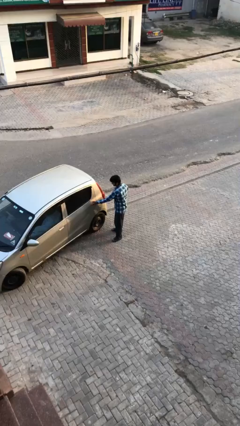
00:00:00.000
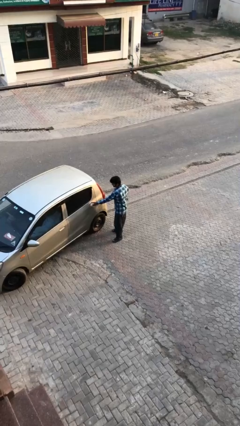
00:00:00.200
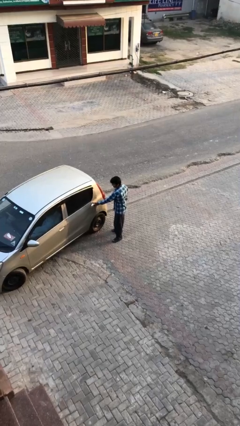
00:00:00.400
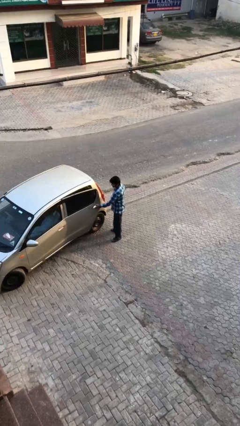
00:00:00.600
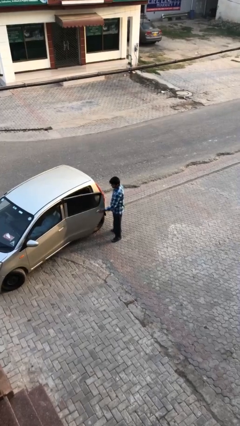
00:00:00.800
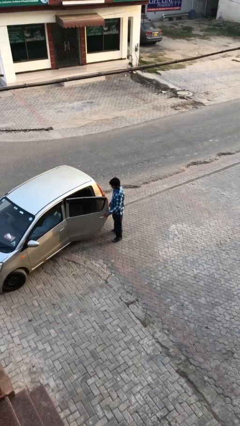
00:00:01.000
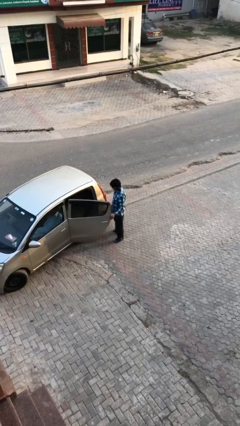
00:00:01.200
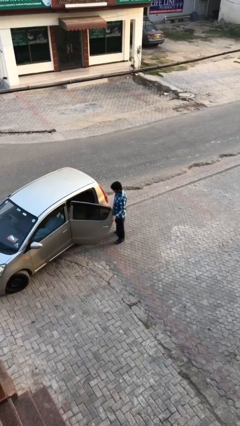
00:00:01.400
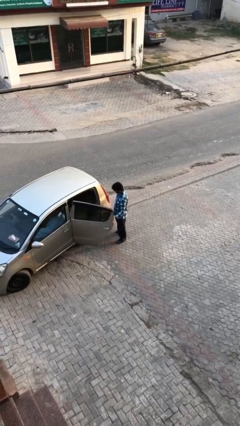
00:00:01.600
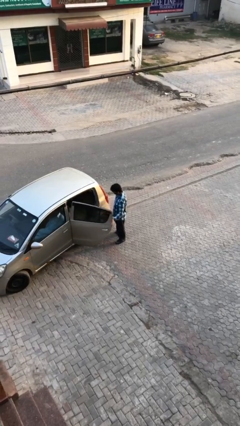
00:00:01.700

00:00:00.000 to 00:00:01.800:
person opens car door

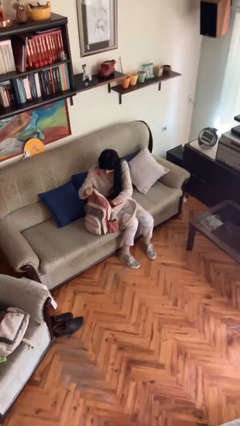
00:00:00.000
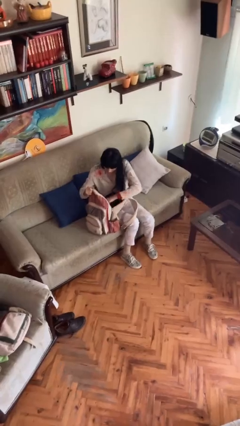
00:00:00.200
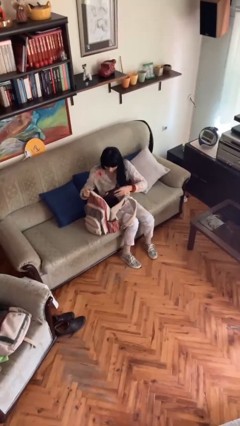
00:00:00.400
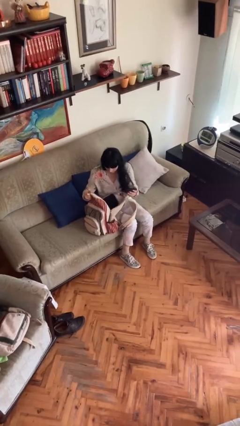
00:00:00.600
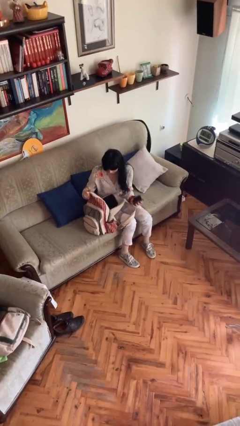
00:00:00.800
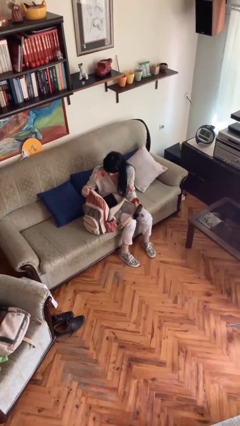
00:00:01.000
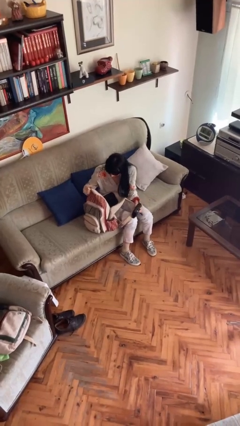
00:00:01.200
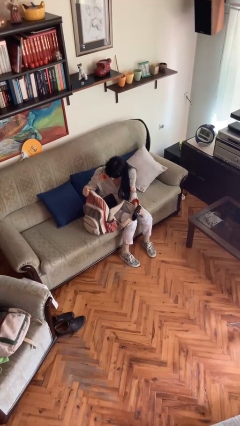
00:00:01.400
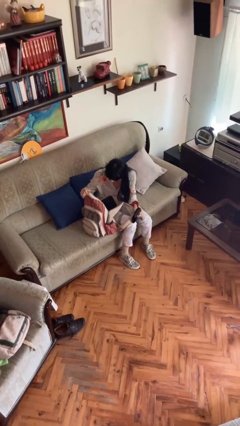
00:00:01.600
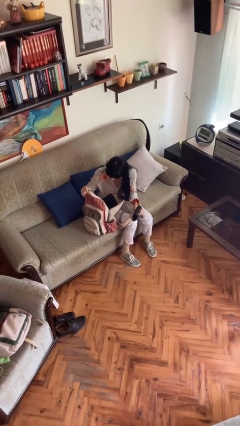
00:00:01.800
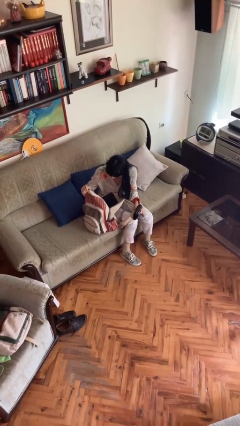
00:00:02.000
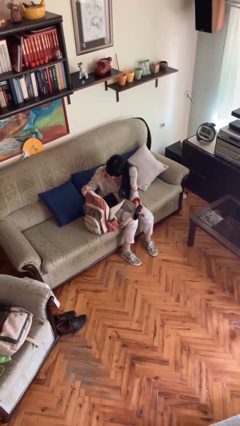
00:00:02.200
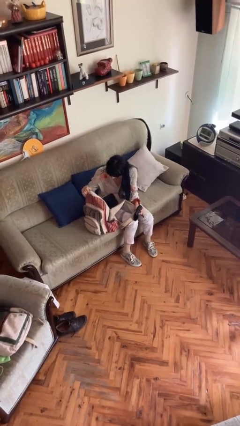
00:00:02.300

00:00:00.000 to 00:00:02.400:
person takes object from backpack

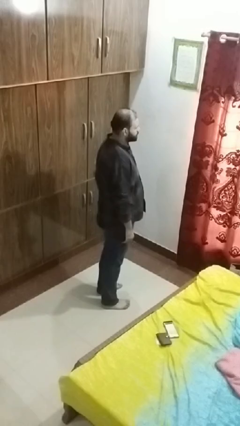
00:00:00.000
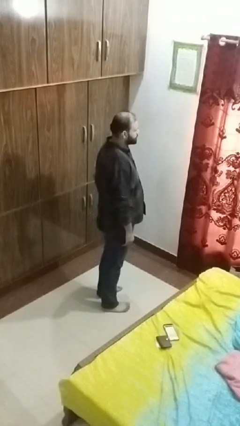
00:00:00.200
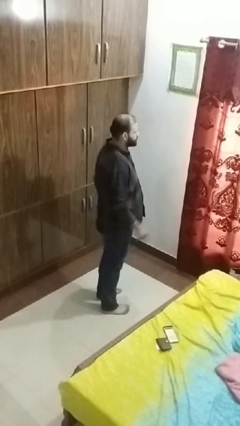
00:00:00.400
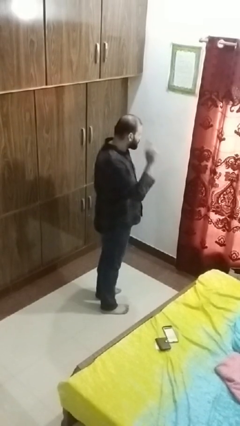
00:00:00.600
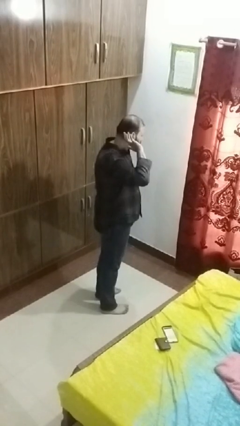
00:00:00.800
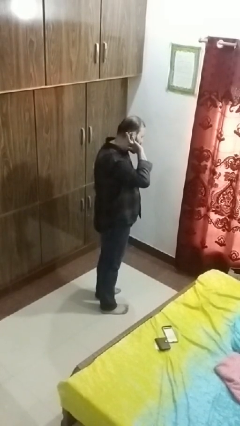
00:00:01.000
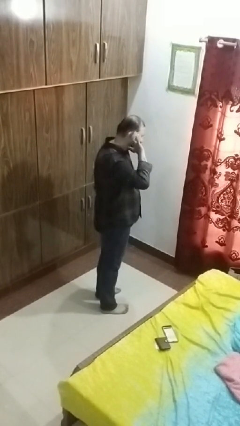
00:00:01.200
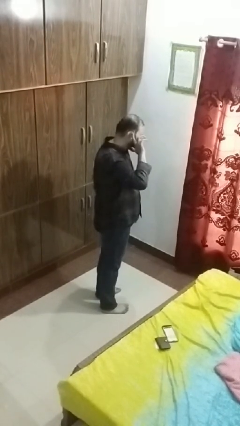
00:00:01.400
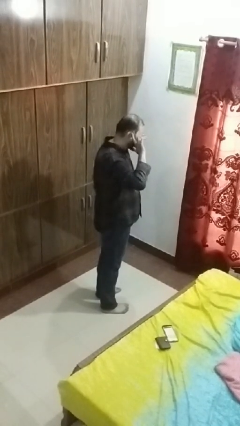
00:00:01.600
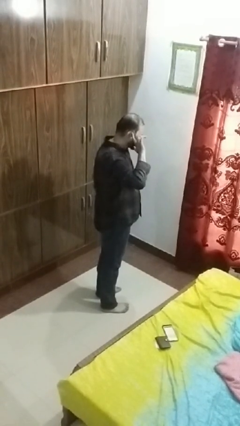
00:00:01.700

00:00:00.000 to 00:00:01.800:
person gestures listen closely

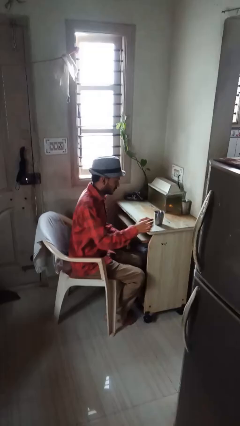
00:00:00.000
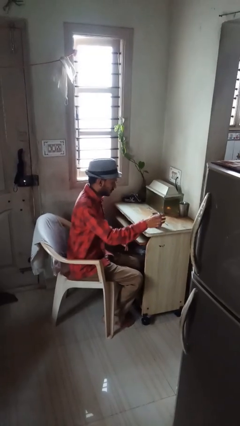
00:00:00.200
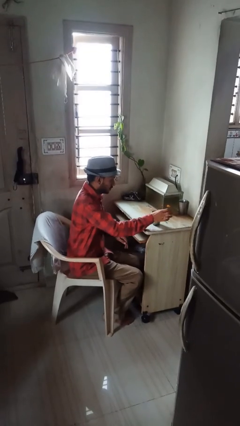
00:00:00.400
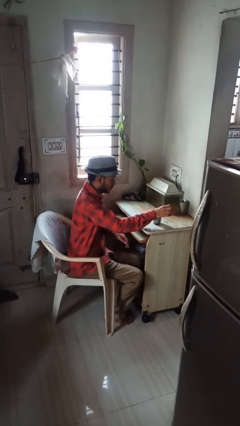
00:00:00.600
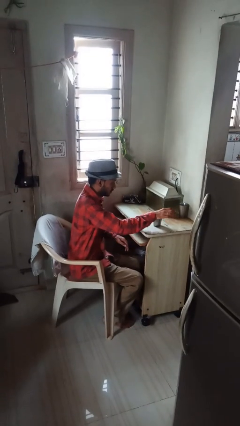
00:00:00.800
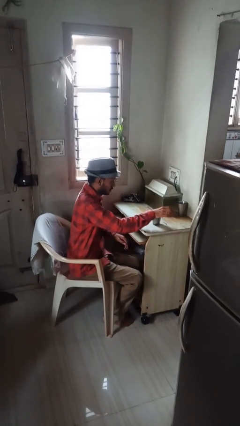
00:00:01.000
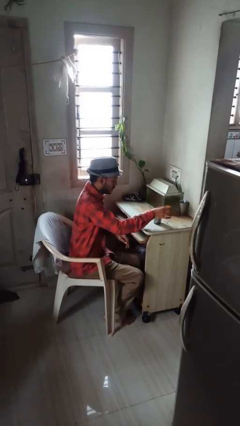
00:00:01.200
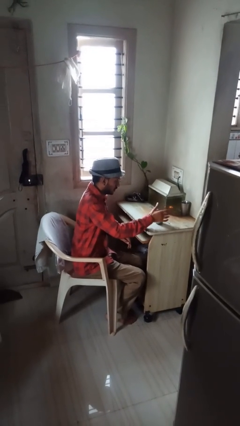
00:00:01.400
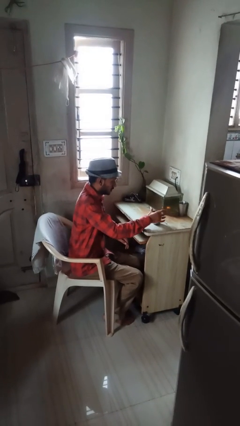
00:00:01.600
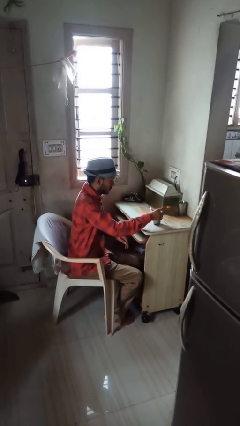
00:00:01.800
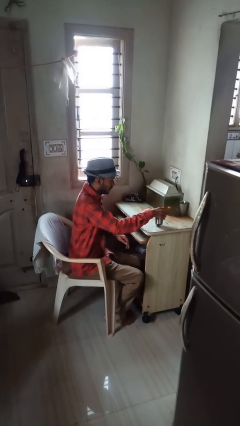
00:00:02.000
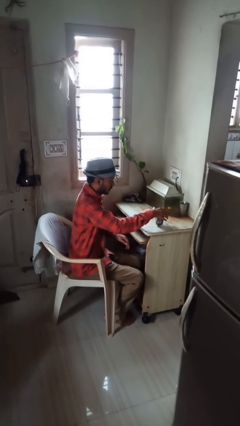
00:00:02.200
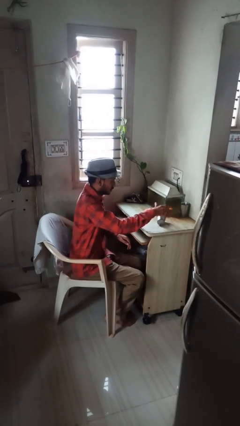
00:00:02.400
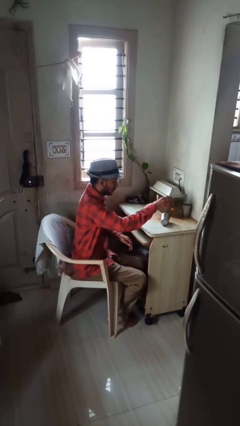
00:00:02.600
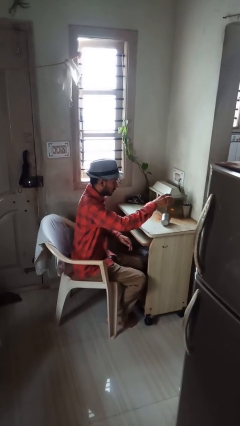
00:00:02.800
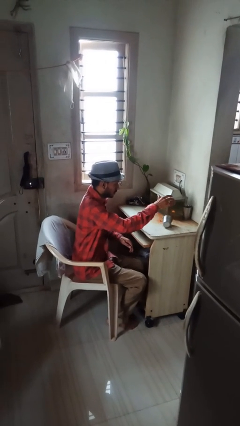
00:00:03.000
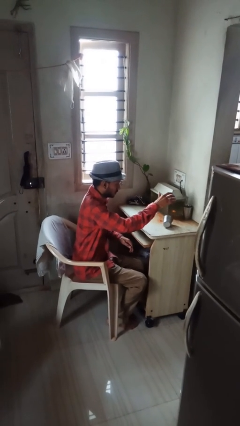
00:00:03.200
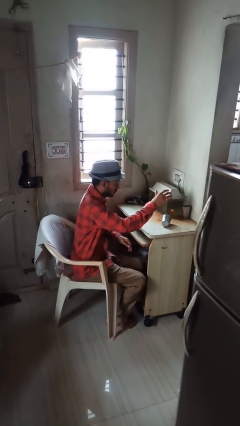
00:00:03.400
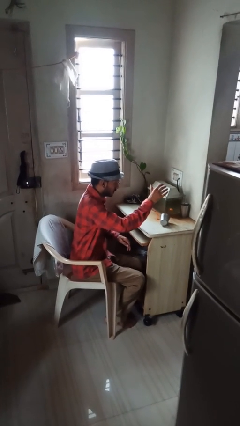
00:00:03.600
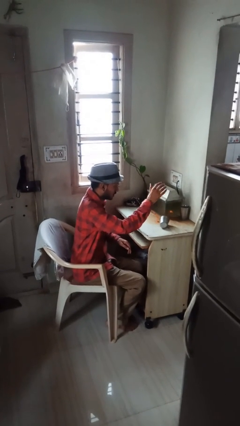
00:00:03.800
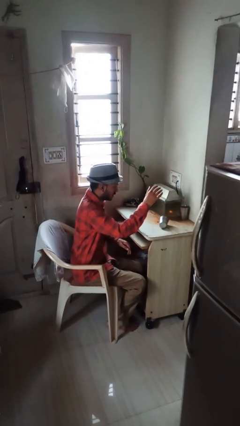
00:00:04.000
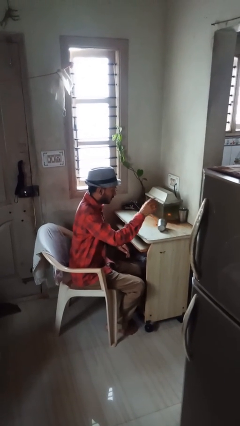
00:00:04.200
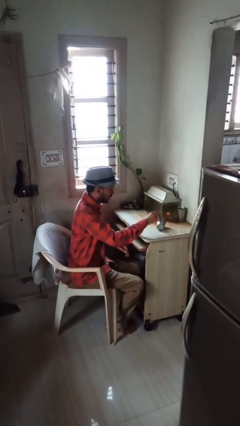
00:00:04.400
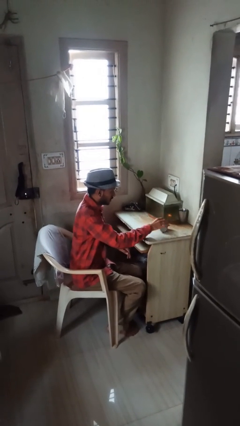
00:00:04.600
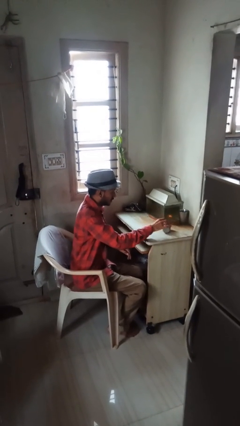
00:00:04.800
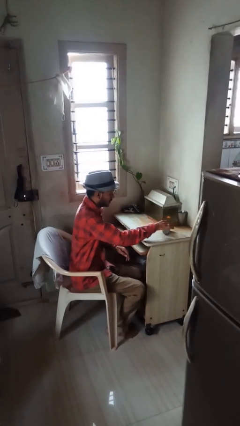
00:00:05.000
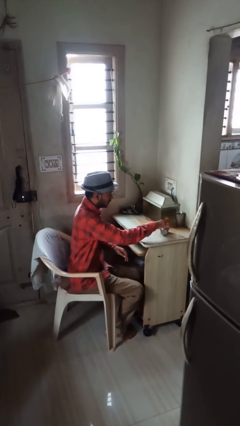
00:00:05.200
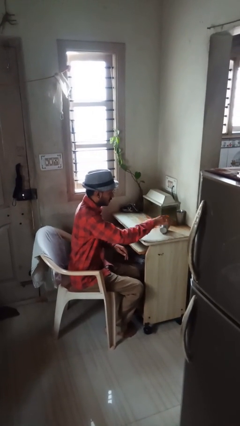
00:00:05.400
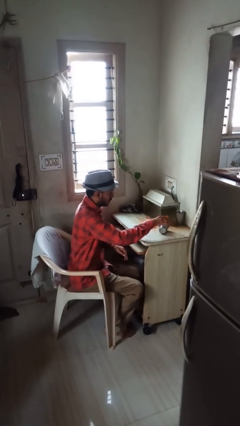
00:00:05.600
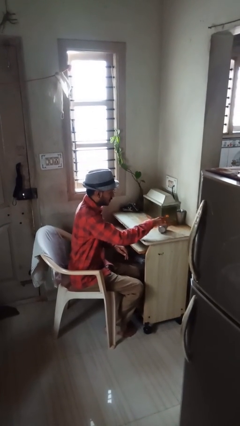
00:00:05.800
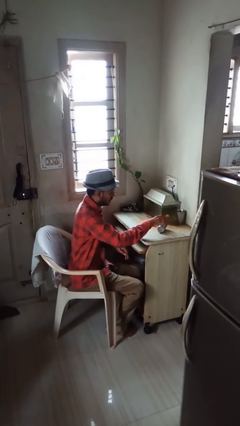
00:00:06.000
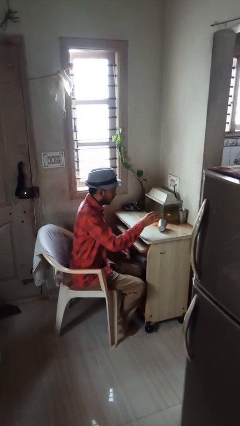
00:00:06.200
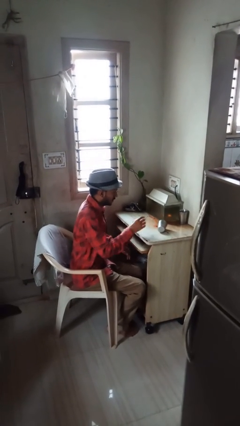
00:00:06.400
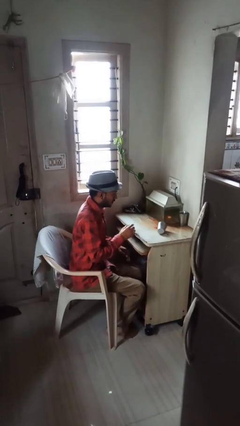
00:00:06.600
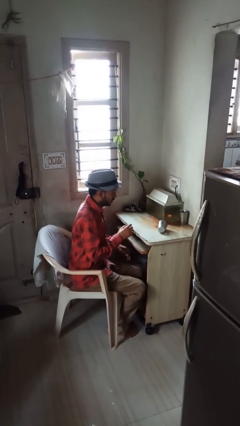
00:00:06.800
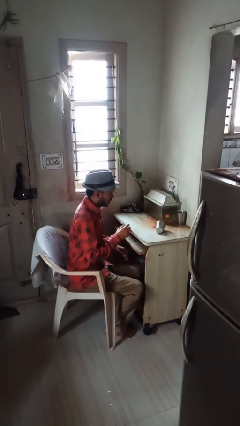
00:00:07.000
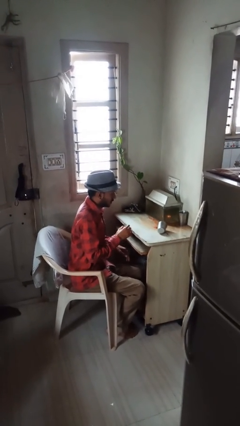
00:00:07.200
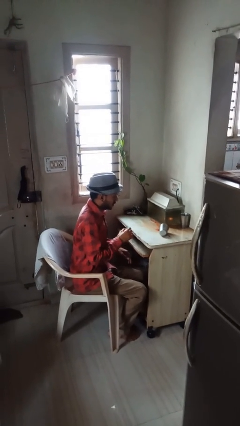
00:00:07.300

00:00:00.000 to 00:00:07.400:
person spills on table

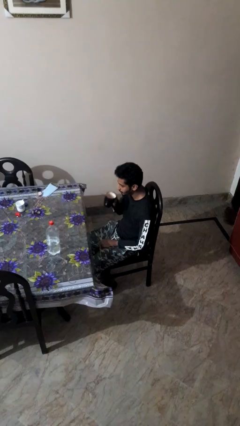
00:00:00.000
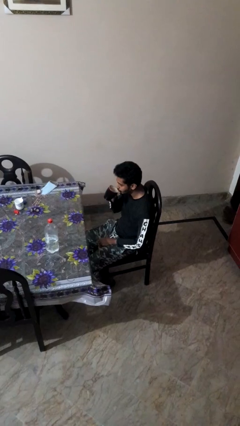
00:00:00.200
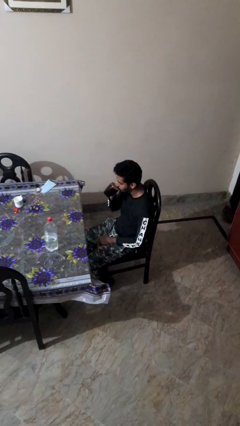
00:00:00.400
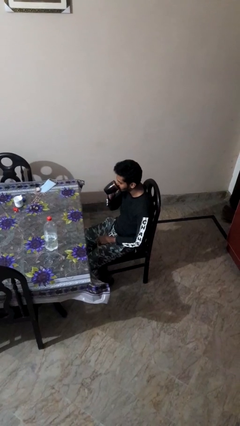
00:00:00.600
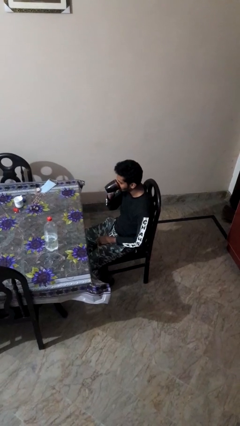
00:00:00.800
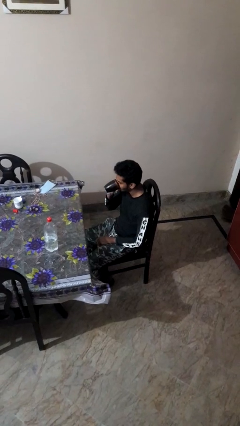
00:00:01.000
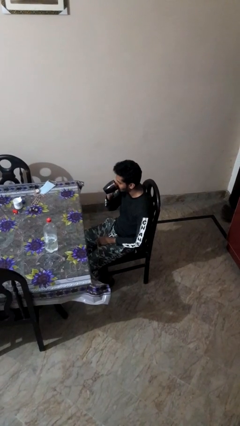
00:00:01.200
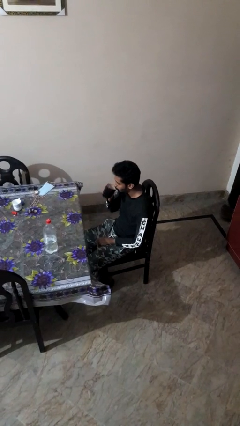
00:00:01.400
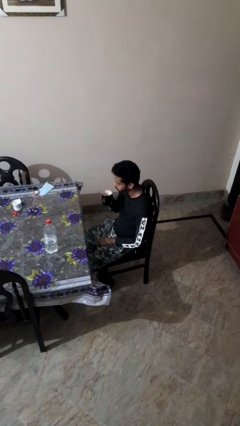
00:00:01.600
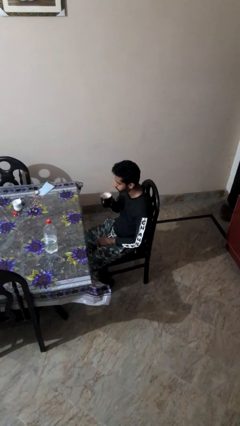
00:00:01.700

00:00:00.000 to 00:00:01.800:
person drinks from mug

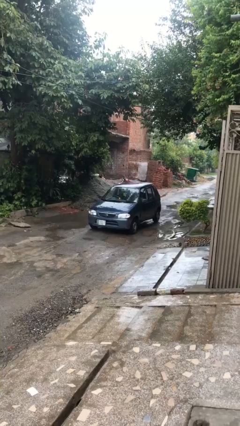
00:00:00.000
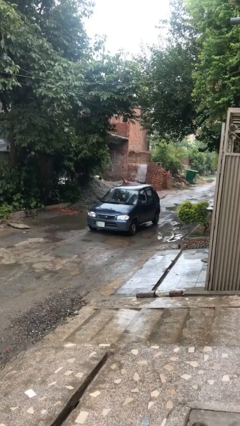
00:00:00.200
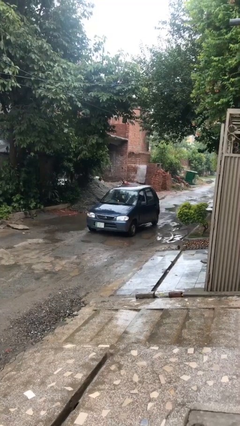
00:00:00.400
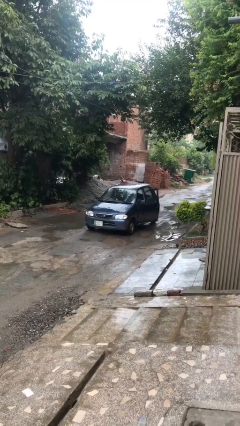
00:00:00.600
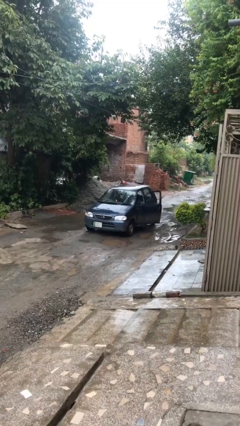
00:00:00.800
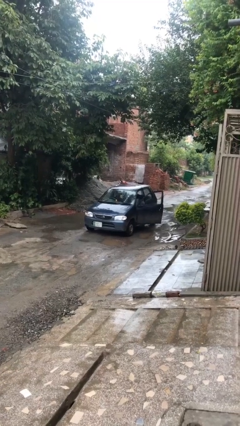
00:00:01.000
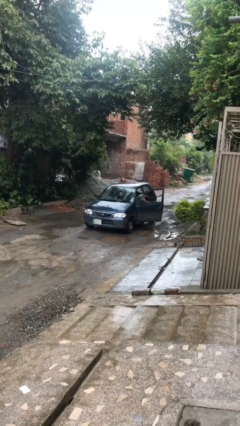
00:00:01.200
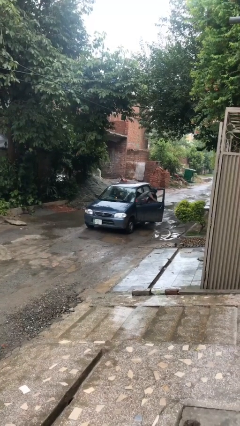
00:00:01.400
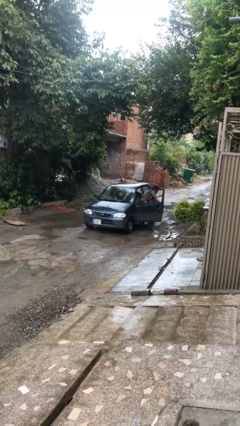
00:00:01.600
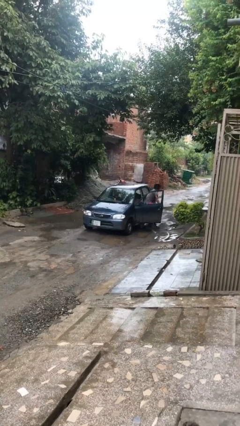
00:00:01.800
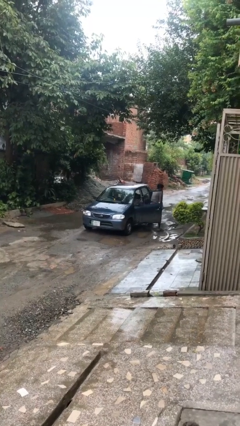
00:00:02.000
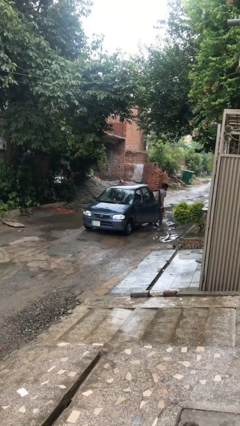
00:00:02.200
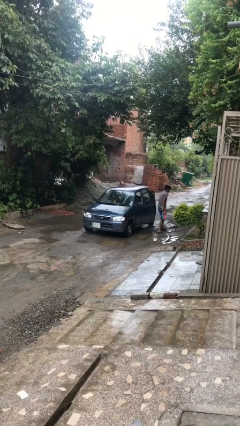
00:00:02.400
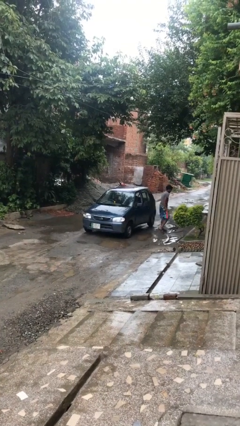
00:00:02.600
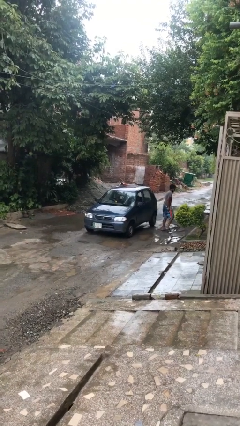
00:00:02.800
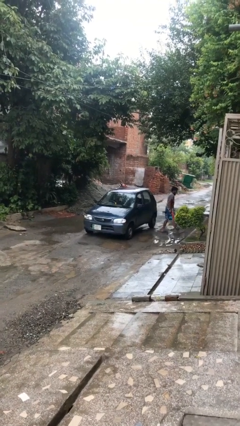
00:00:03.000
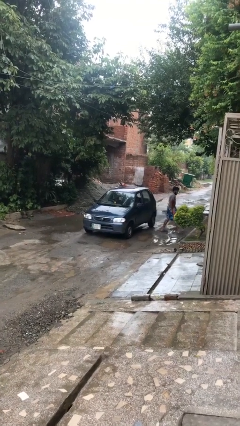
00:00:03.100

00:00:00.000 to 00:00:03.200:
car drops off person
